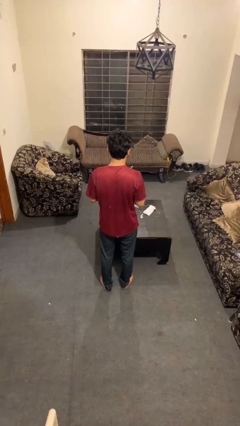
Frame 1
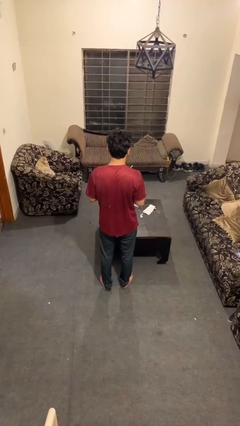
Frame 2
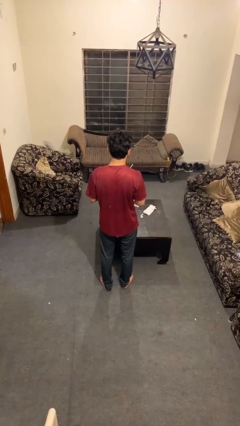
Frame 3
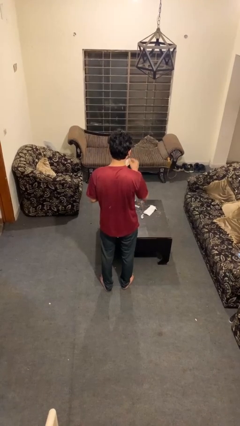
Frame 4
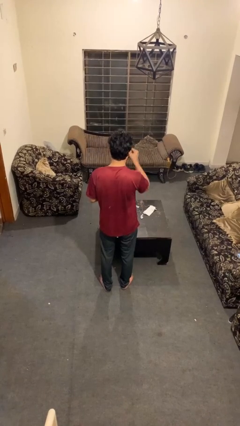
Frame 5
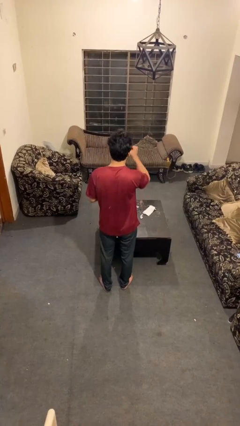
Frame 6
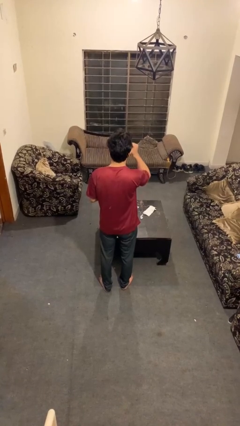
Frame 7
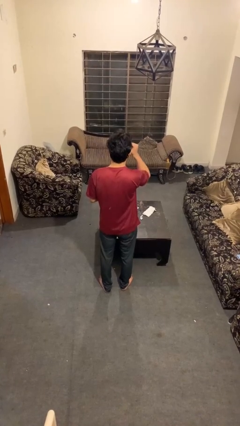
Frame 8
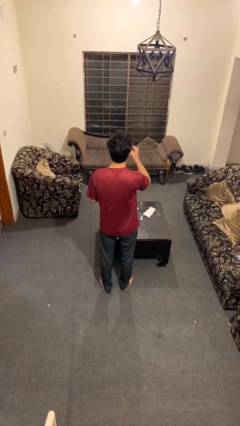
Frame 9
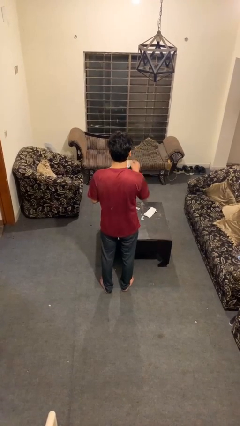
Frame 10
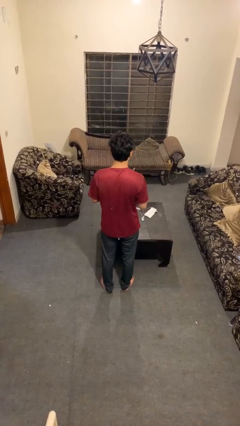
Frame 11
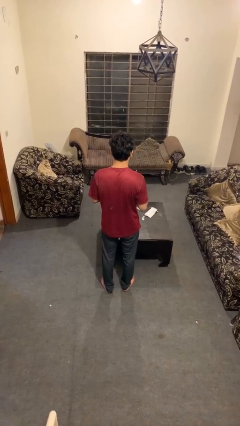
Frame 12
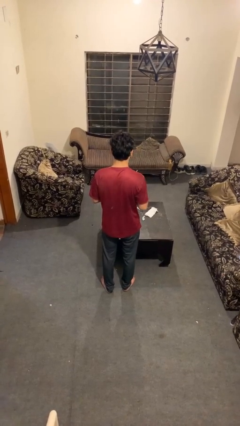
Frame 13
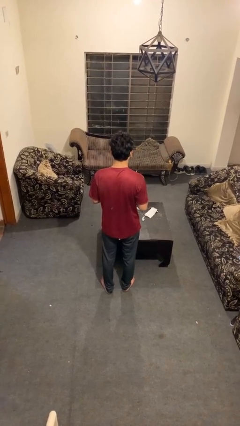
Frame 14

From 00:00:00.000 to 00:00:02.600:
person drinks from mug

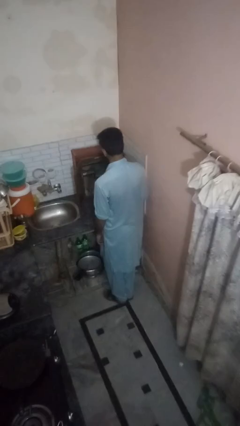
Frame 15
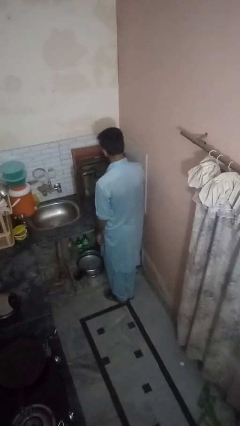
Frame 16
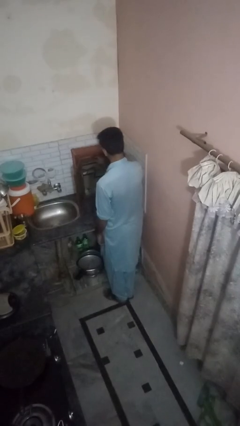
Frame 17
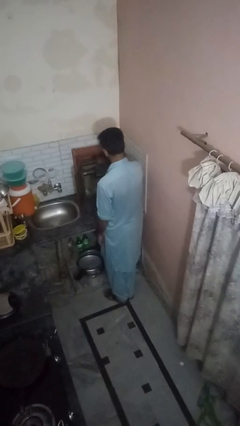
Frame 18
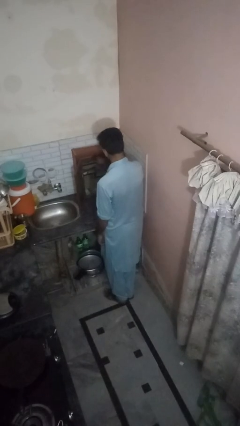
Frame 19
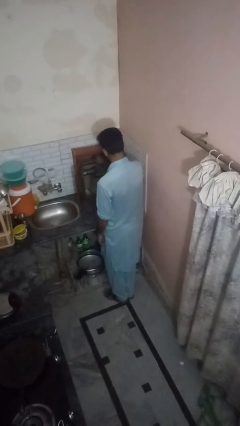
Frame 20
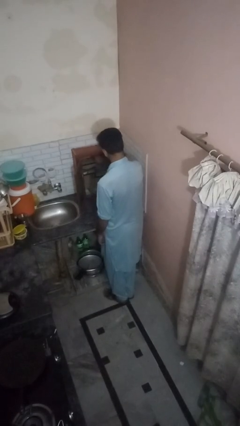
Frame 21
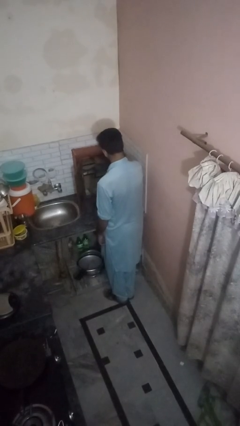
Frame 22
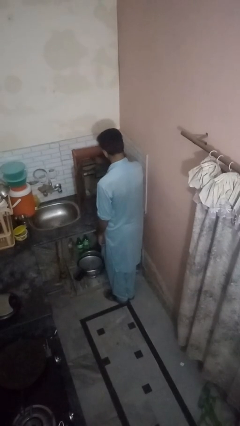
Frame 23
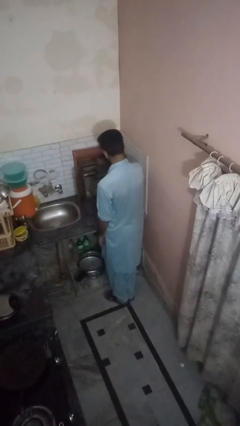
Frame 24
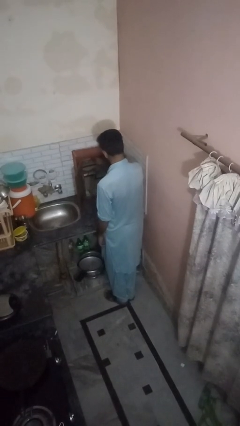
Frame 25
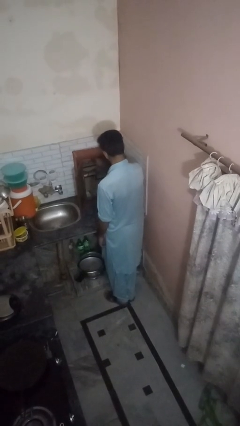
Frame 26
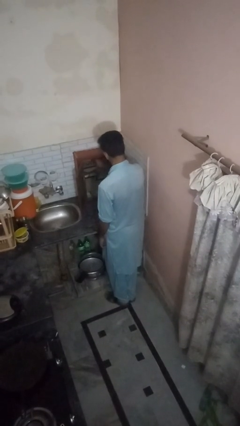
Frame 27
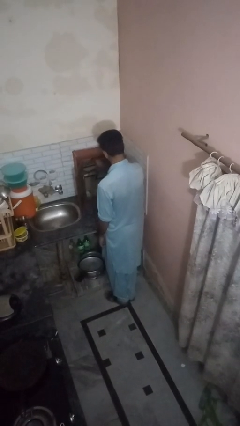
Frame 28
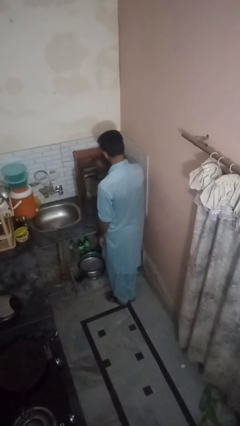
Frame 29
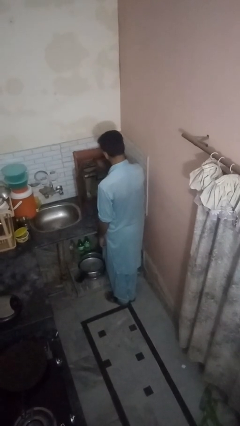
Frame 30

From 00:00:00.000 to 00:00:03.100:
person searches in kitchen drawer

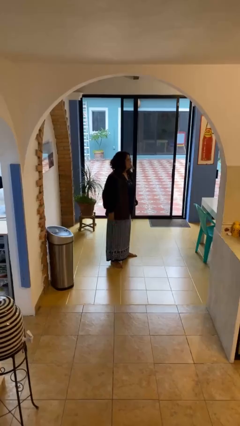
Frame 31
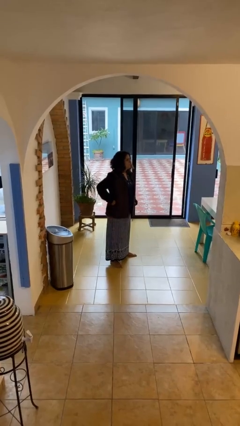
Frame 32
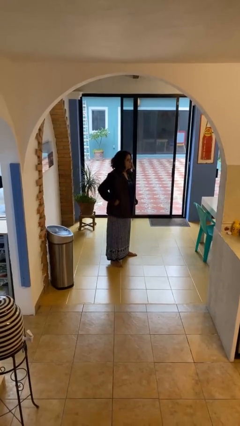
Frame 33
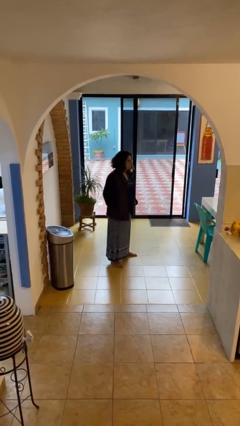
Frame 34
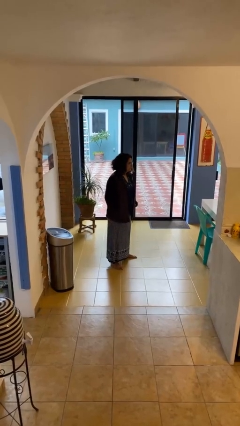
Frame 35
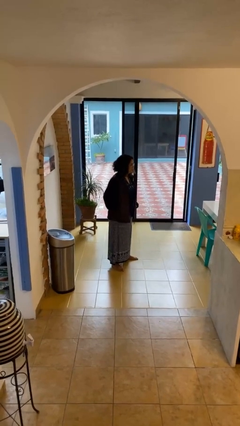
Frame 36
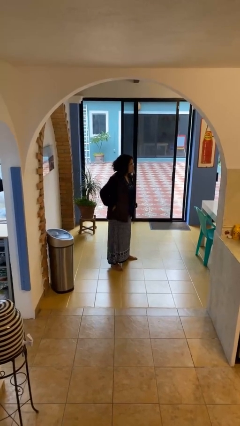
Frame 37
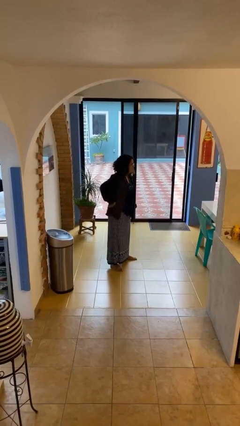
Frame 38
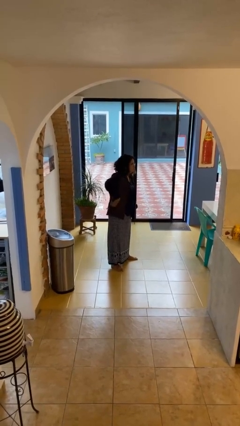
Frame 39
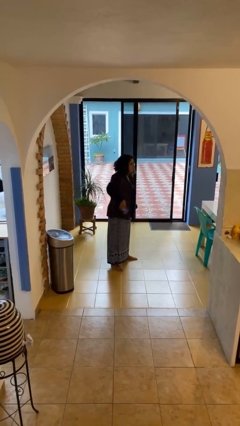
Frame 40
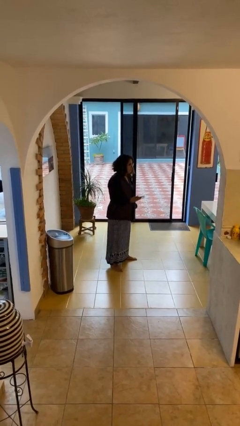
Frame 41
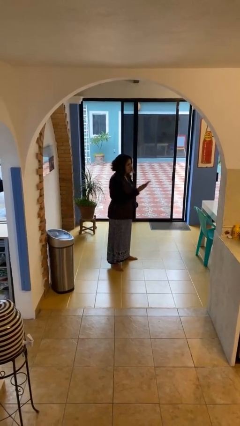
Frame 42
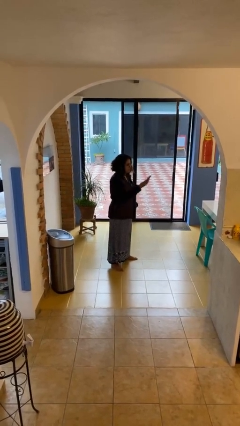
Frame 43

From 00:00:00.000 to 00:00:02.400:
person takes phone from pocket

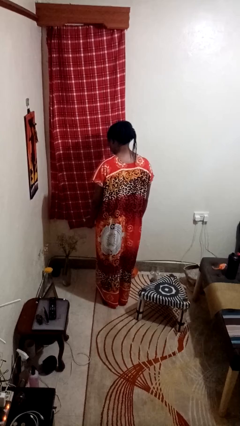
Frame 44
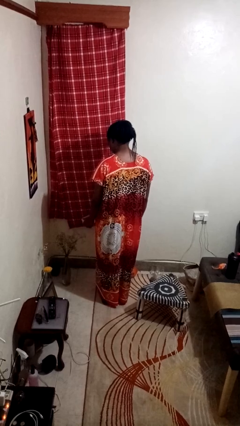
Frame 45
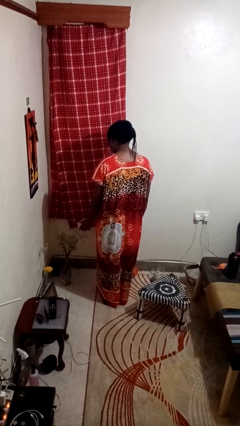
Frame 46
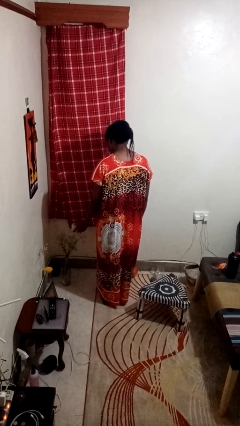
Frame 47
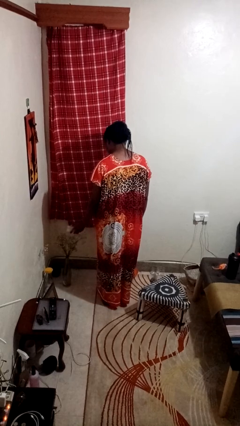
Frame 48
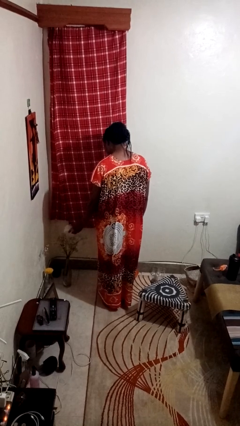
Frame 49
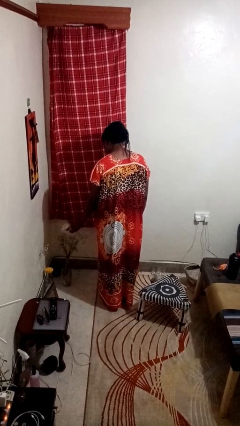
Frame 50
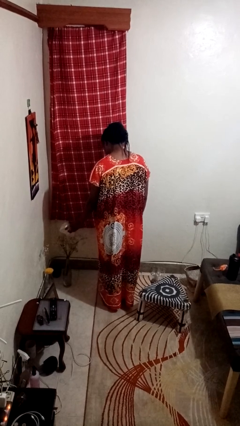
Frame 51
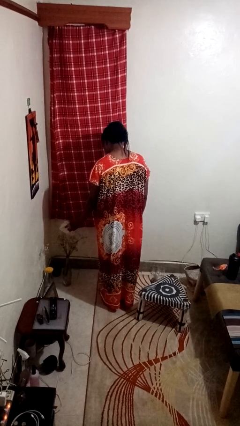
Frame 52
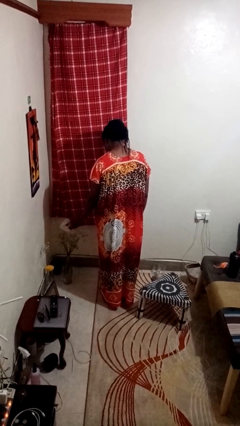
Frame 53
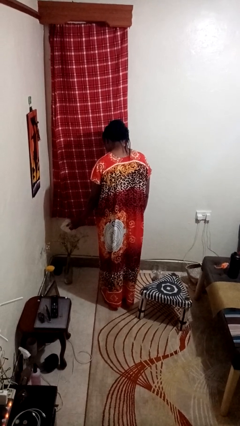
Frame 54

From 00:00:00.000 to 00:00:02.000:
person waters houseplant

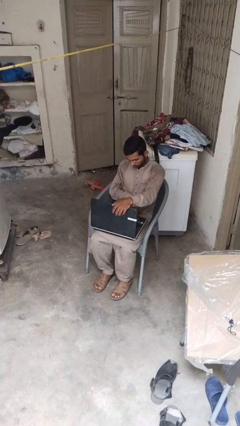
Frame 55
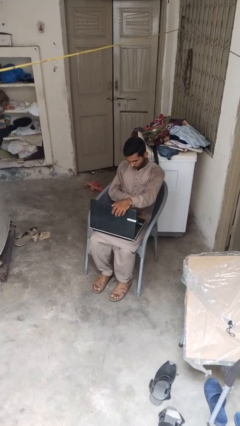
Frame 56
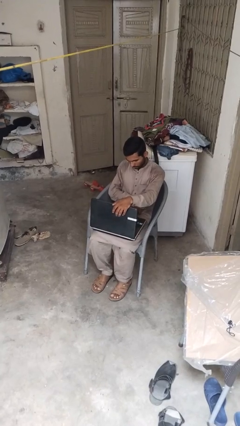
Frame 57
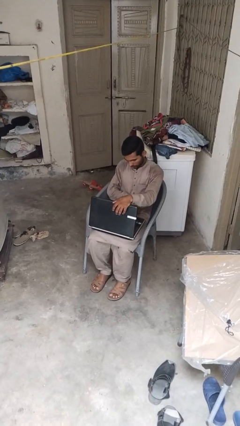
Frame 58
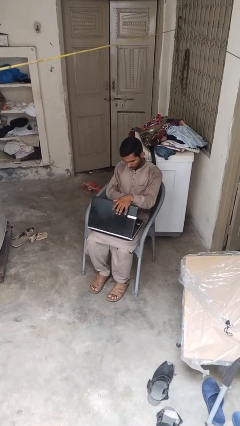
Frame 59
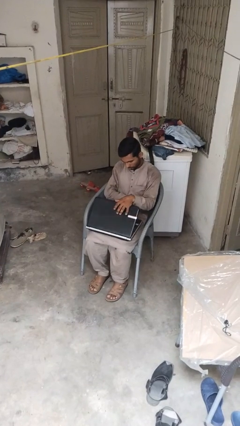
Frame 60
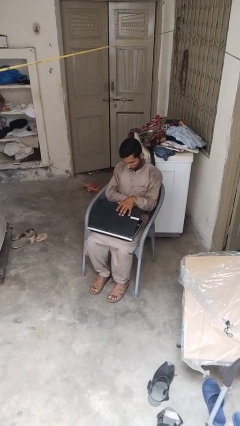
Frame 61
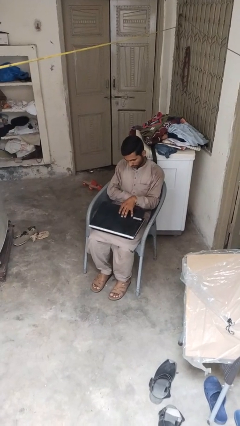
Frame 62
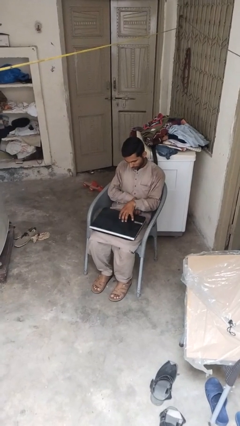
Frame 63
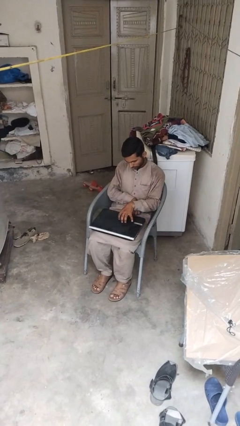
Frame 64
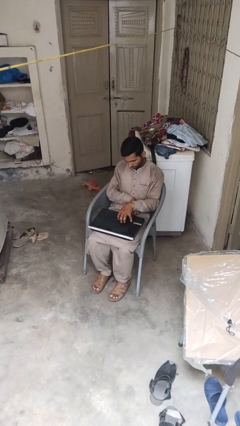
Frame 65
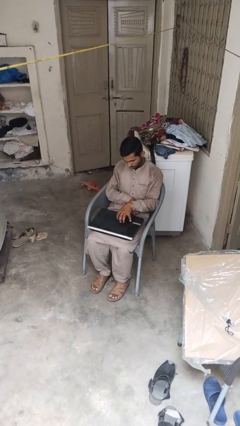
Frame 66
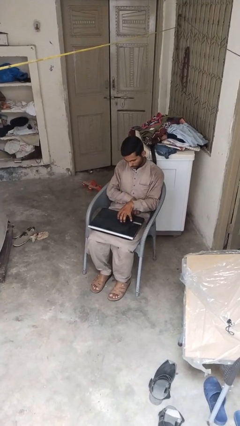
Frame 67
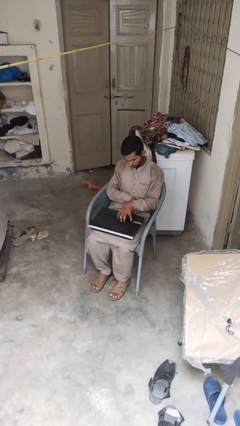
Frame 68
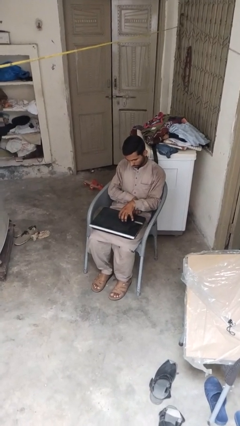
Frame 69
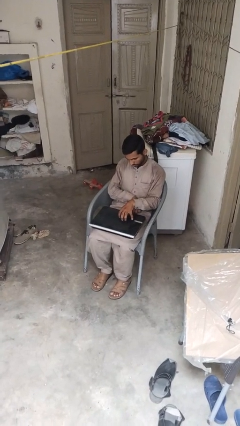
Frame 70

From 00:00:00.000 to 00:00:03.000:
person closes laptop

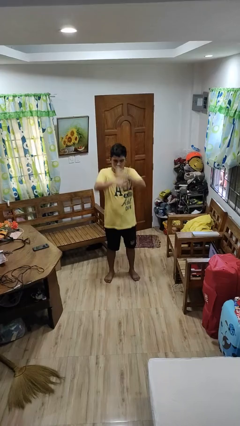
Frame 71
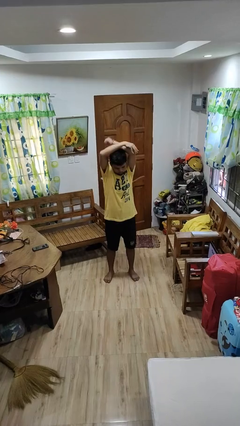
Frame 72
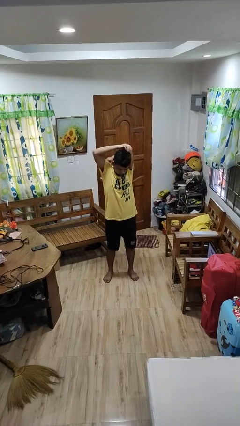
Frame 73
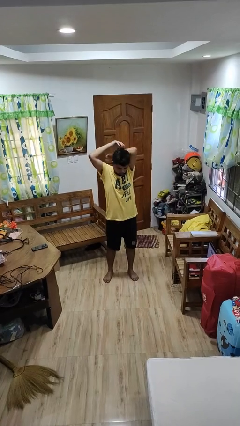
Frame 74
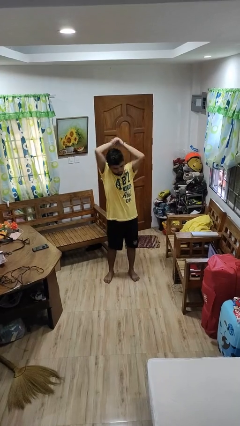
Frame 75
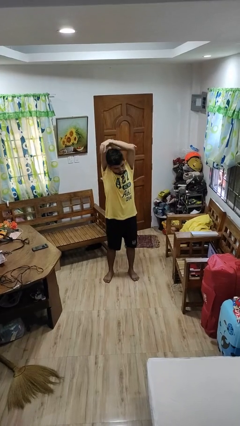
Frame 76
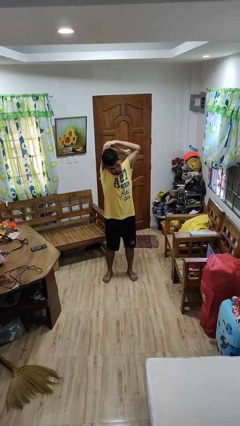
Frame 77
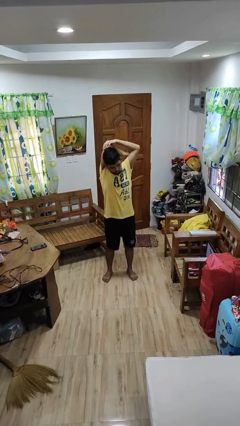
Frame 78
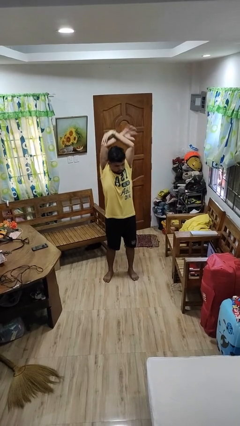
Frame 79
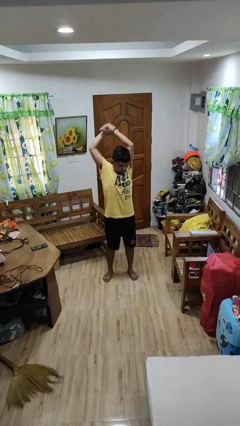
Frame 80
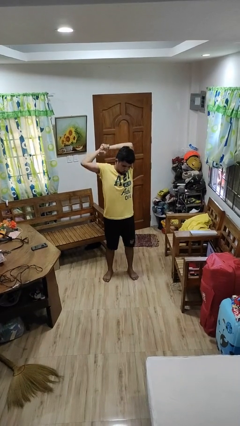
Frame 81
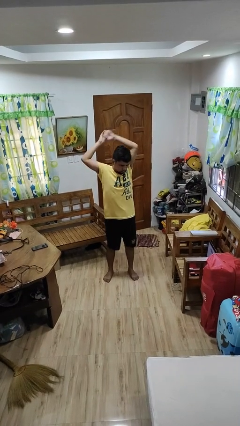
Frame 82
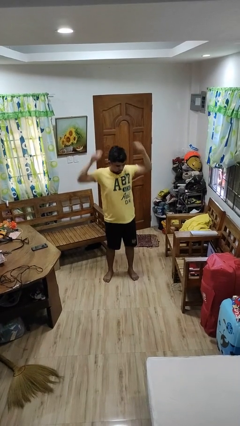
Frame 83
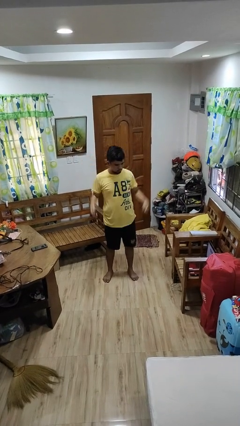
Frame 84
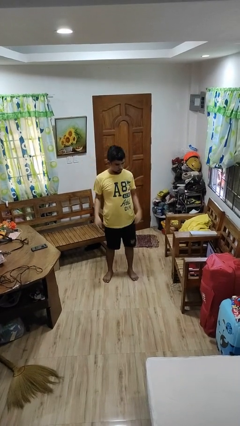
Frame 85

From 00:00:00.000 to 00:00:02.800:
person stretches arms over head

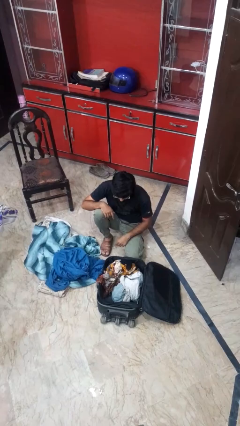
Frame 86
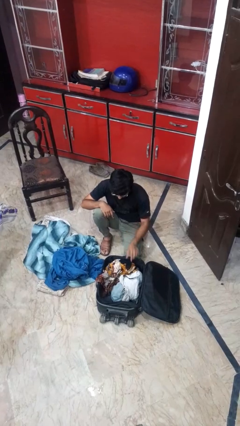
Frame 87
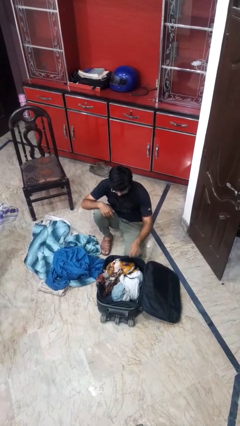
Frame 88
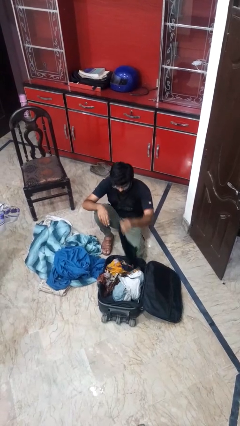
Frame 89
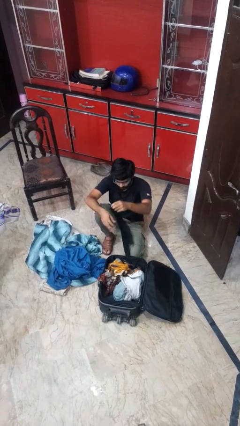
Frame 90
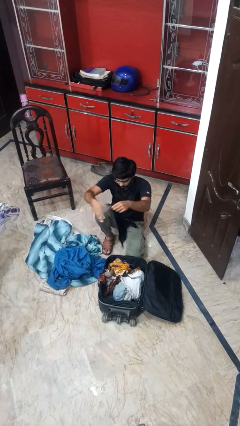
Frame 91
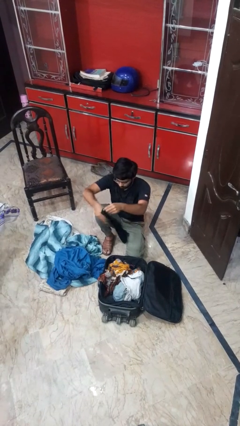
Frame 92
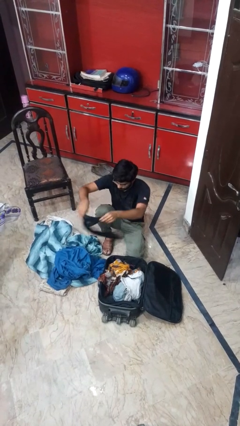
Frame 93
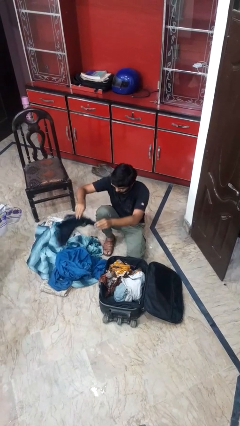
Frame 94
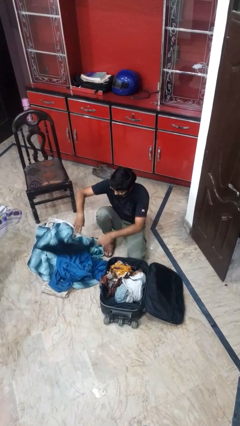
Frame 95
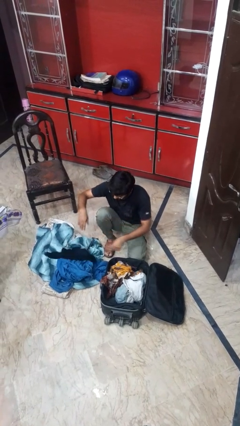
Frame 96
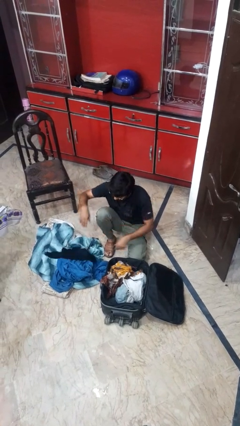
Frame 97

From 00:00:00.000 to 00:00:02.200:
person unloads clothes from suitcase
